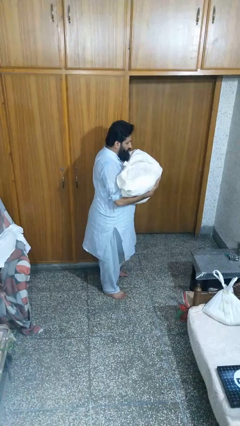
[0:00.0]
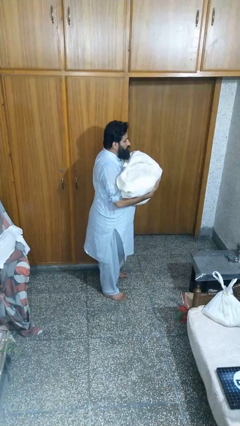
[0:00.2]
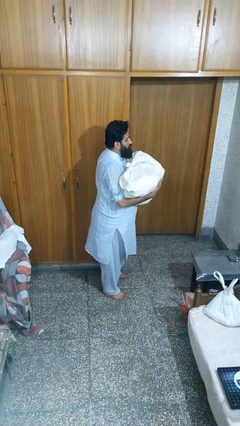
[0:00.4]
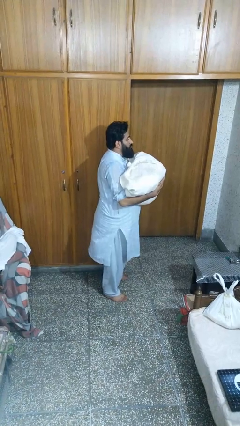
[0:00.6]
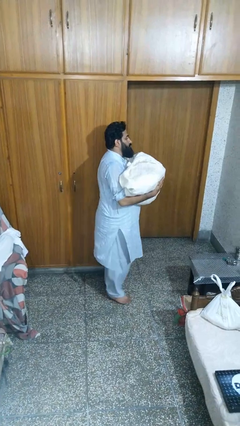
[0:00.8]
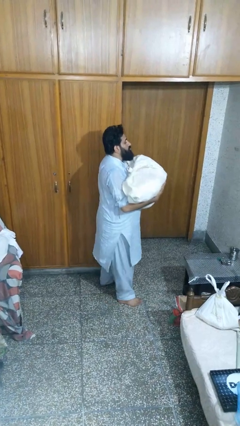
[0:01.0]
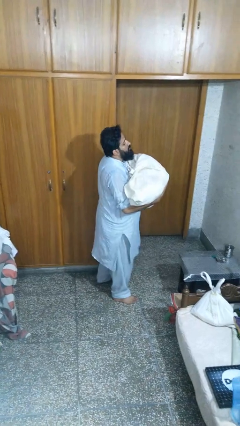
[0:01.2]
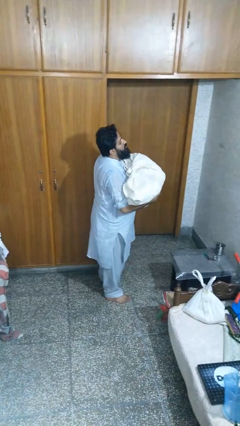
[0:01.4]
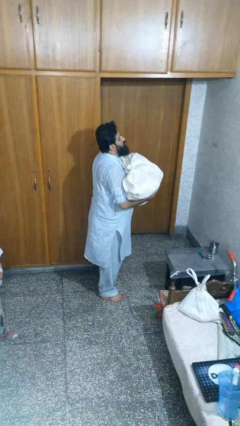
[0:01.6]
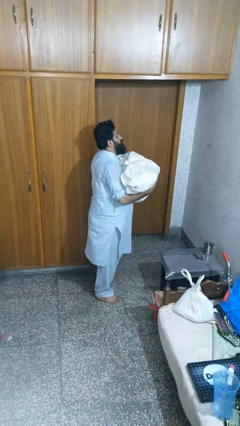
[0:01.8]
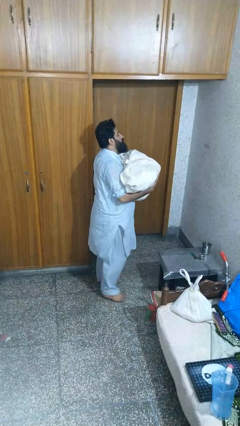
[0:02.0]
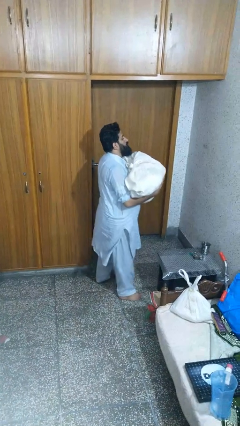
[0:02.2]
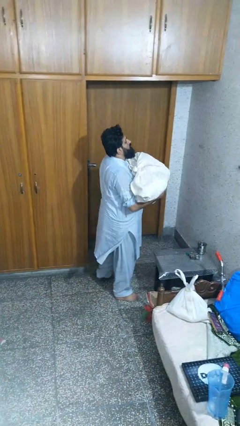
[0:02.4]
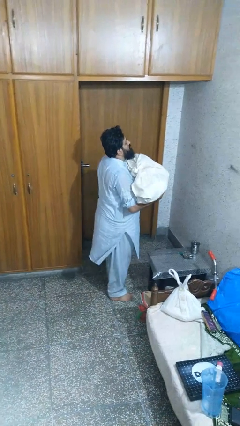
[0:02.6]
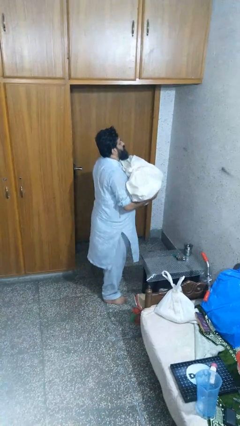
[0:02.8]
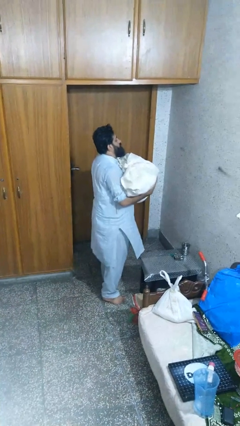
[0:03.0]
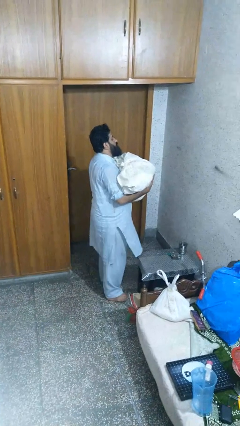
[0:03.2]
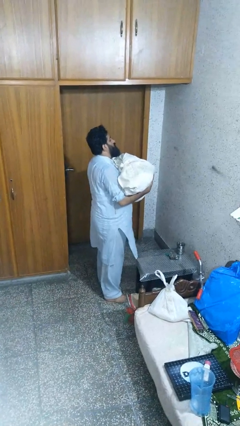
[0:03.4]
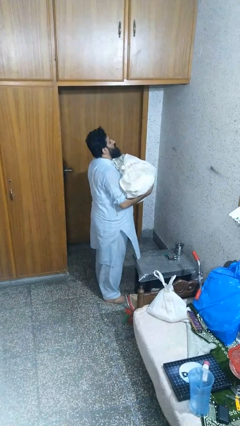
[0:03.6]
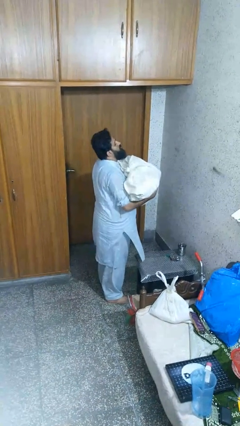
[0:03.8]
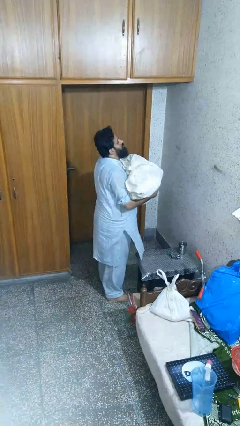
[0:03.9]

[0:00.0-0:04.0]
person carries laundry basket

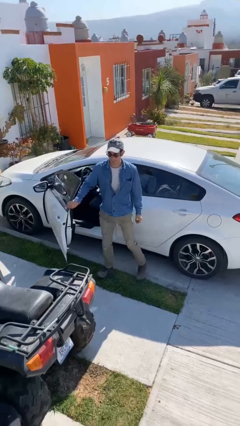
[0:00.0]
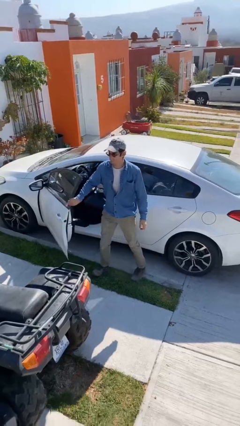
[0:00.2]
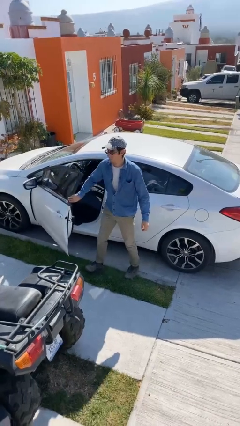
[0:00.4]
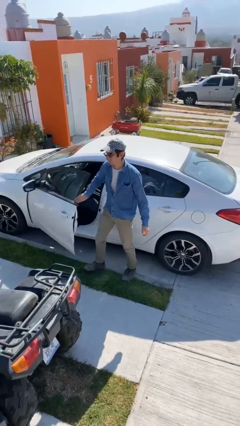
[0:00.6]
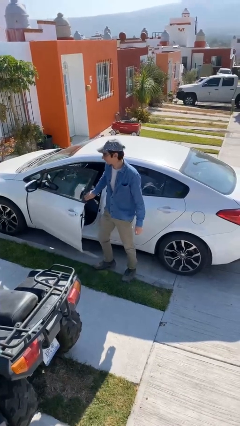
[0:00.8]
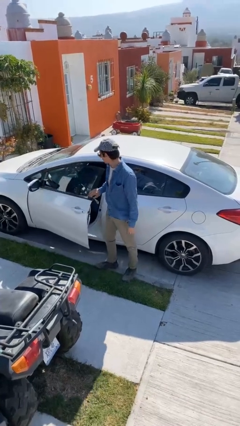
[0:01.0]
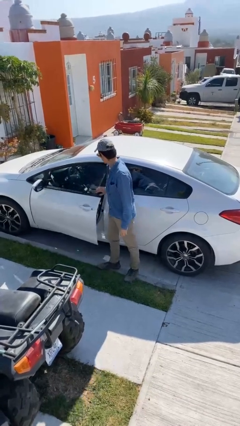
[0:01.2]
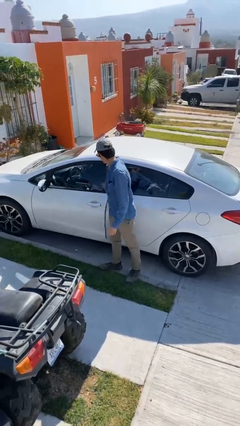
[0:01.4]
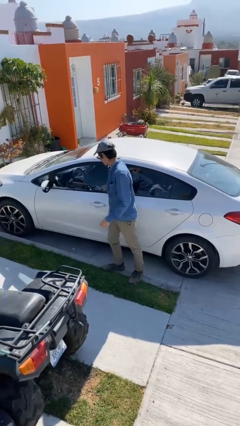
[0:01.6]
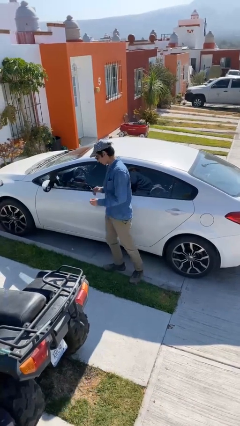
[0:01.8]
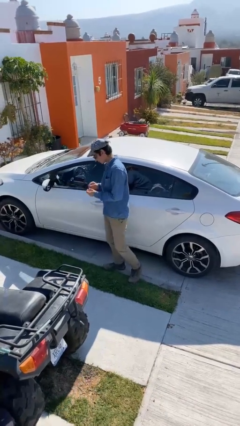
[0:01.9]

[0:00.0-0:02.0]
person closes car door

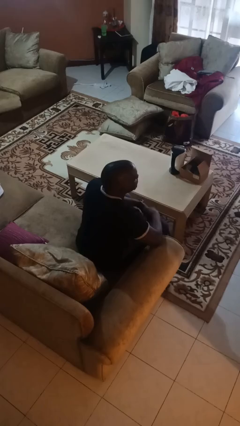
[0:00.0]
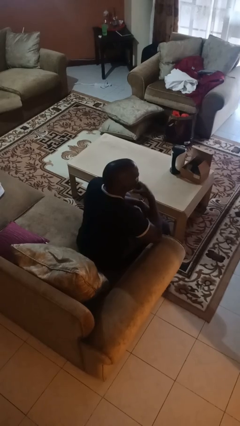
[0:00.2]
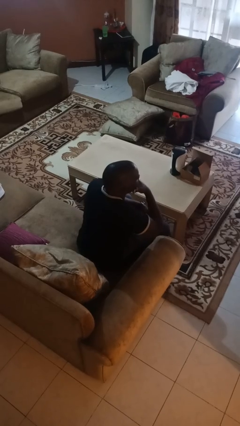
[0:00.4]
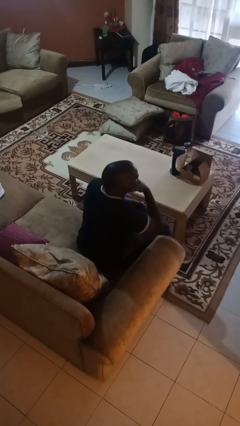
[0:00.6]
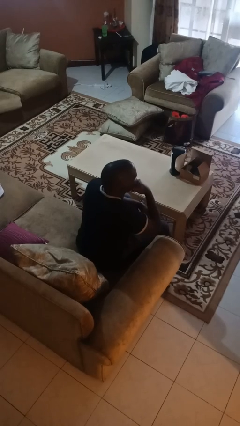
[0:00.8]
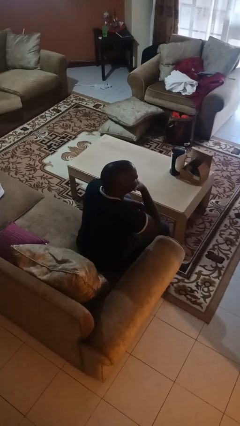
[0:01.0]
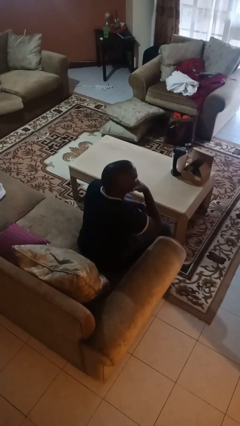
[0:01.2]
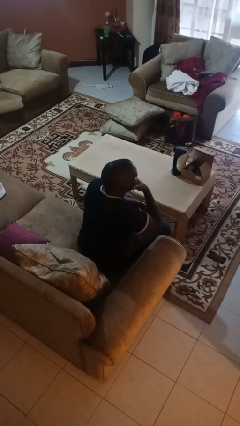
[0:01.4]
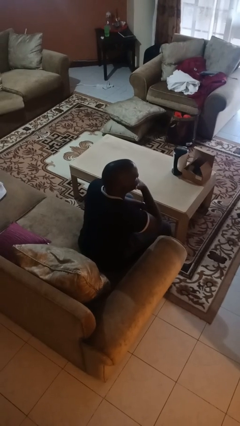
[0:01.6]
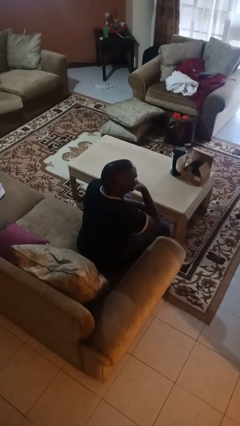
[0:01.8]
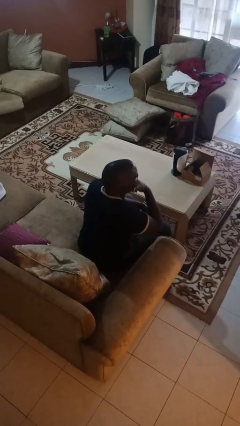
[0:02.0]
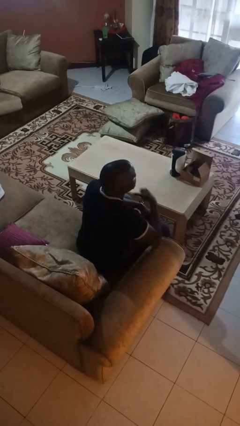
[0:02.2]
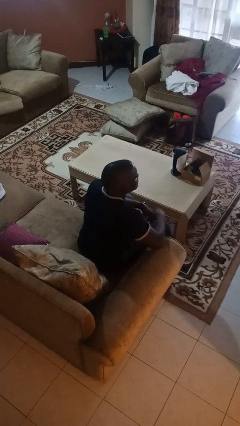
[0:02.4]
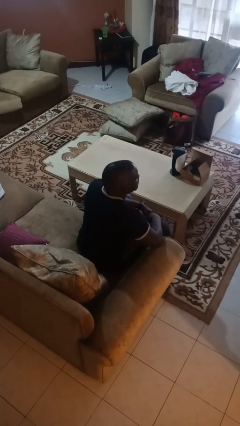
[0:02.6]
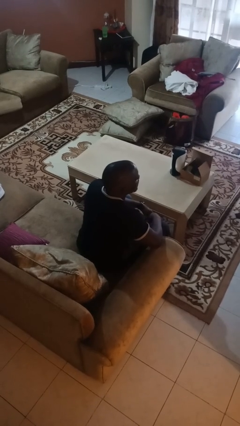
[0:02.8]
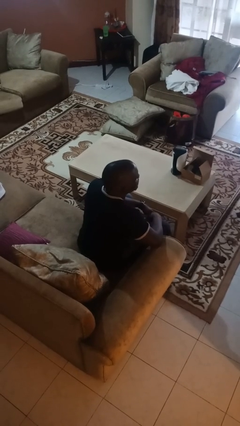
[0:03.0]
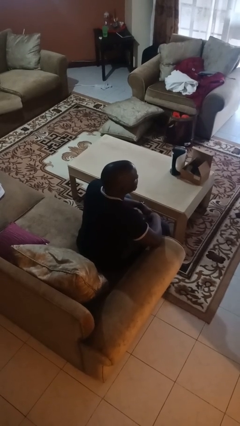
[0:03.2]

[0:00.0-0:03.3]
person strokes chin

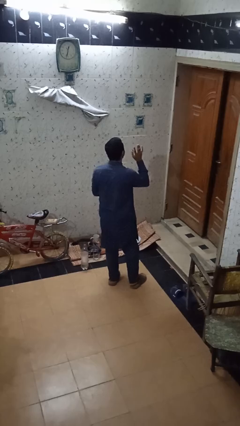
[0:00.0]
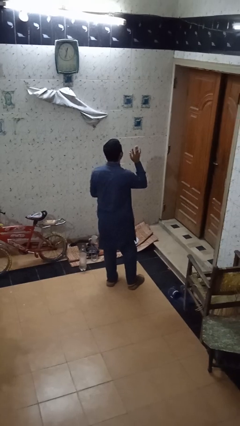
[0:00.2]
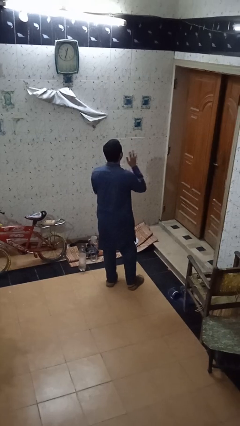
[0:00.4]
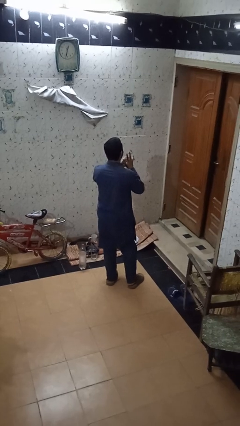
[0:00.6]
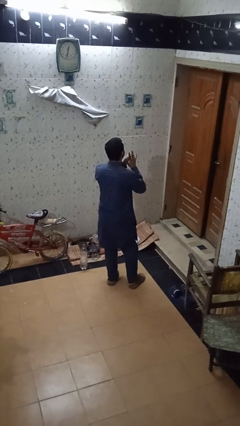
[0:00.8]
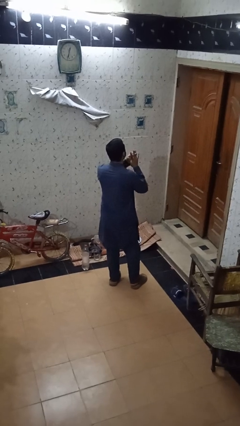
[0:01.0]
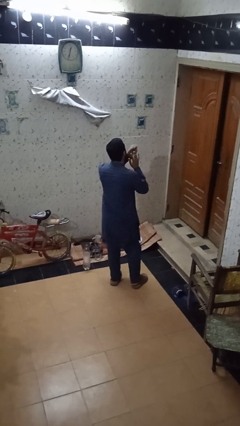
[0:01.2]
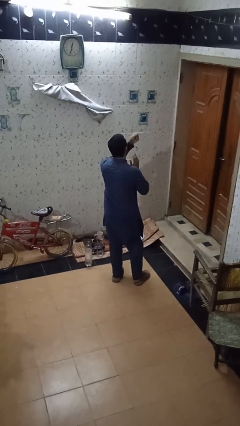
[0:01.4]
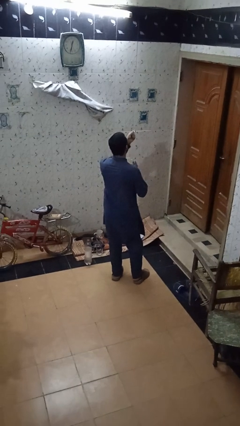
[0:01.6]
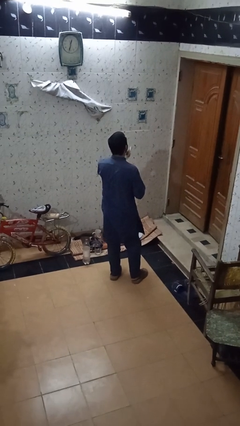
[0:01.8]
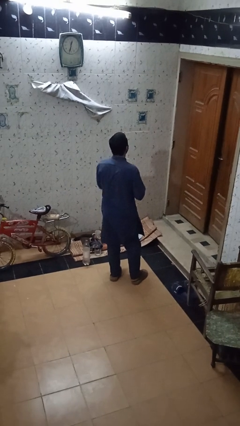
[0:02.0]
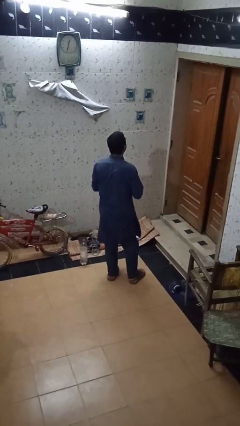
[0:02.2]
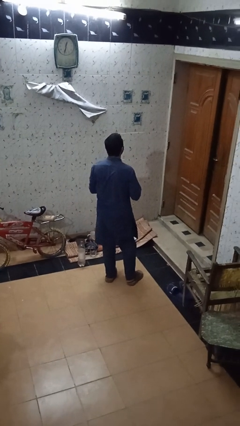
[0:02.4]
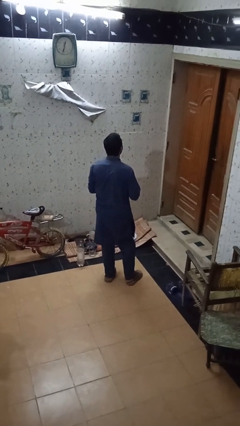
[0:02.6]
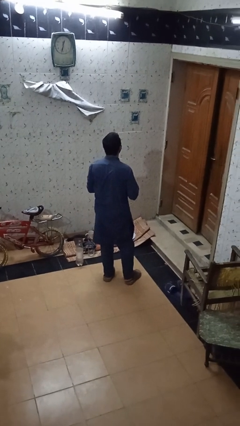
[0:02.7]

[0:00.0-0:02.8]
person takes off ring

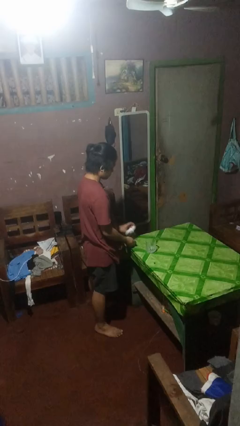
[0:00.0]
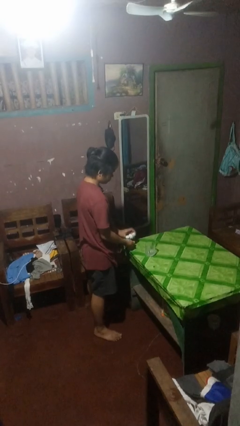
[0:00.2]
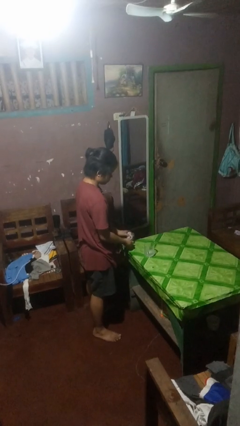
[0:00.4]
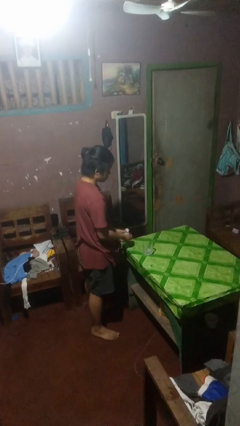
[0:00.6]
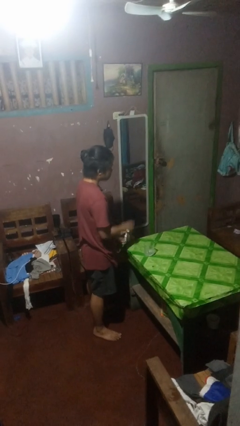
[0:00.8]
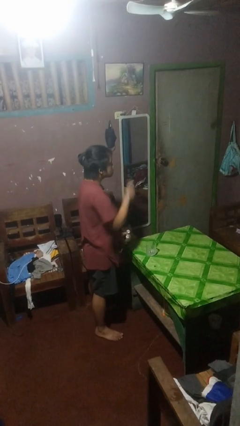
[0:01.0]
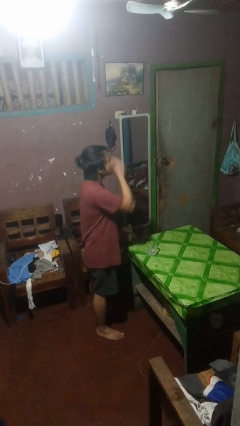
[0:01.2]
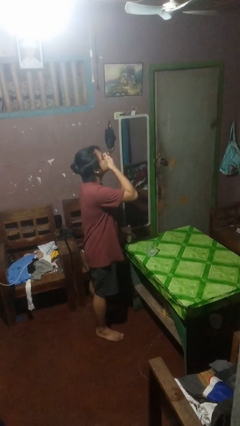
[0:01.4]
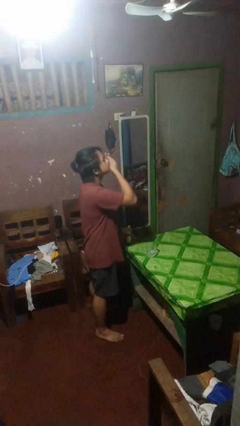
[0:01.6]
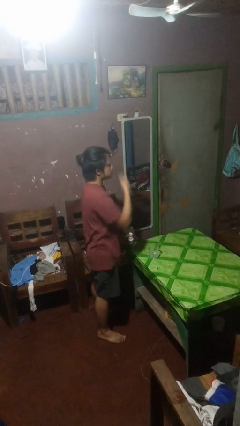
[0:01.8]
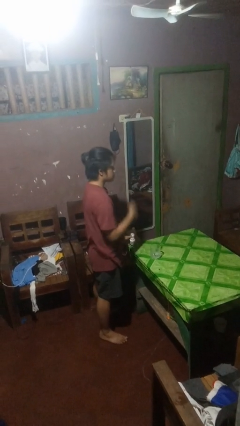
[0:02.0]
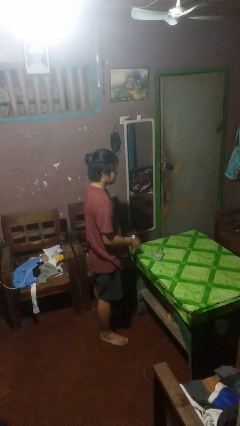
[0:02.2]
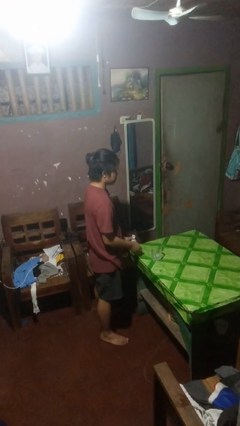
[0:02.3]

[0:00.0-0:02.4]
person takes medicine pills

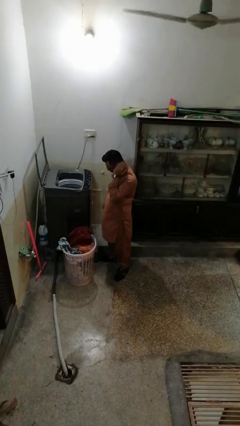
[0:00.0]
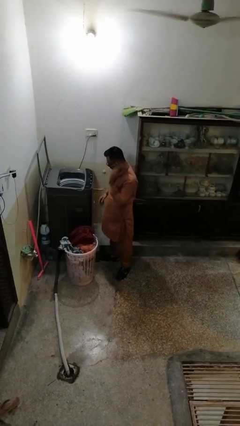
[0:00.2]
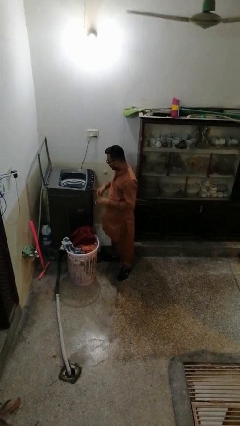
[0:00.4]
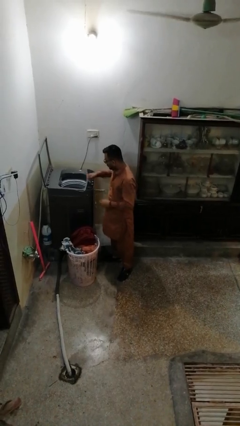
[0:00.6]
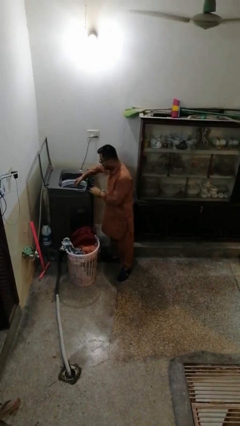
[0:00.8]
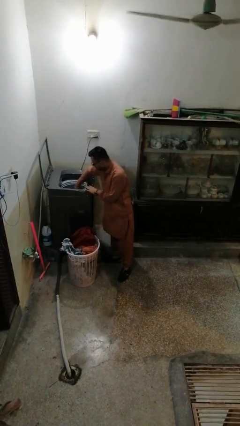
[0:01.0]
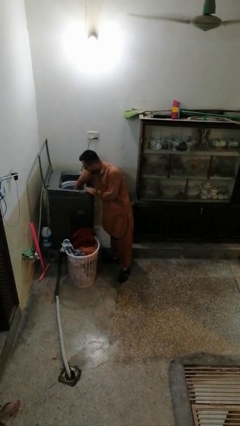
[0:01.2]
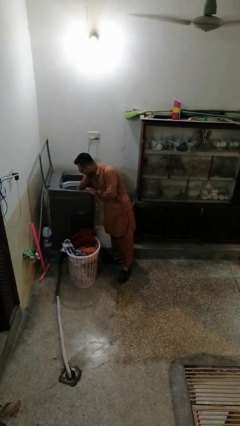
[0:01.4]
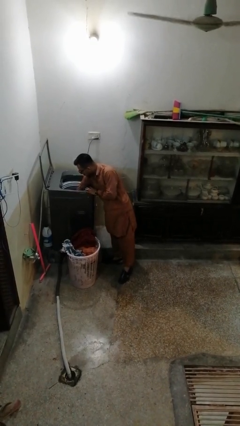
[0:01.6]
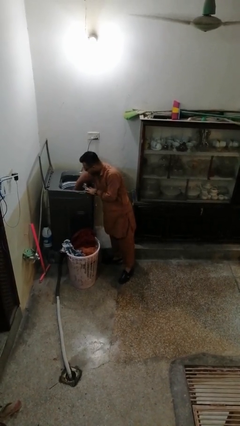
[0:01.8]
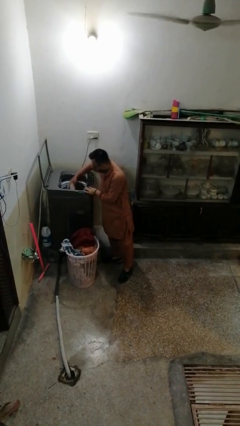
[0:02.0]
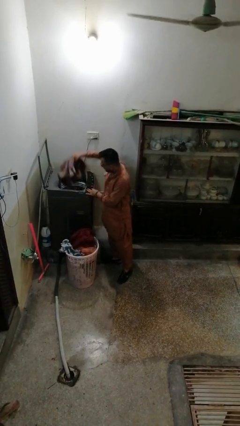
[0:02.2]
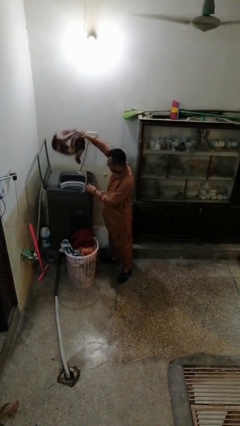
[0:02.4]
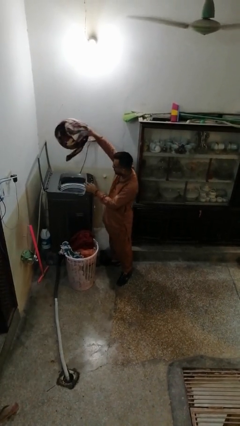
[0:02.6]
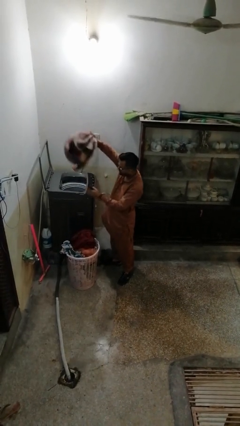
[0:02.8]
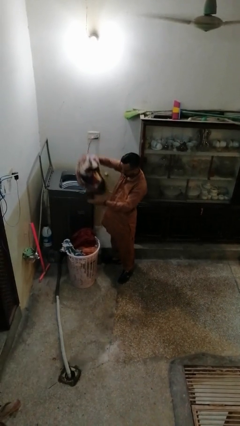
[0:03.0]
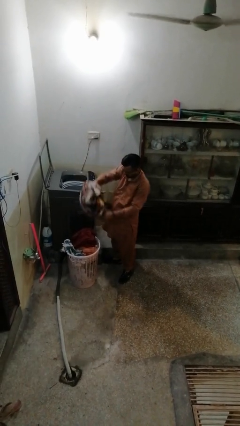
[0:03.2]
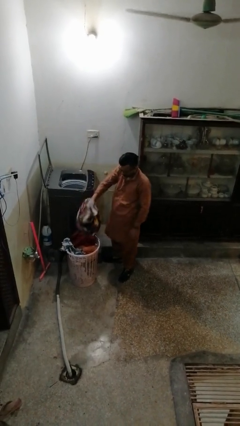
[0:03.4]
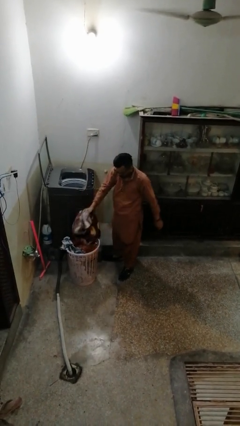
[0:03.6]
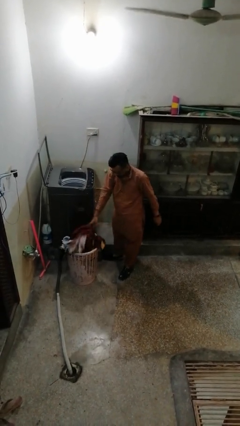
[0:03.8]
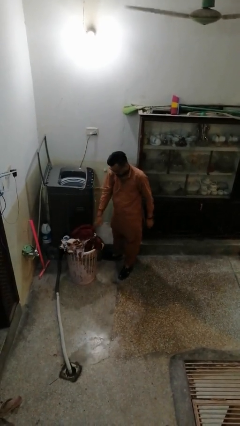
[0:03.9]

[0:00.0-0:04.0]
person unloads dryer
